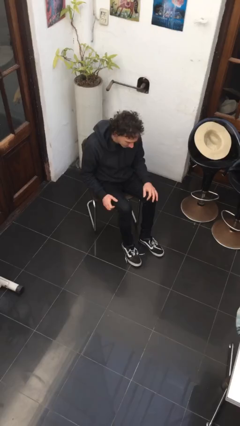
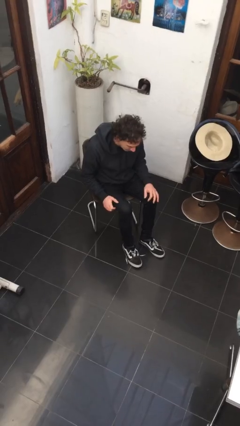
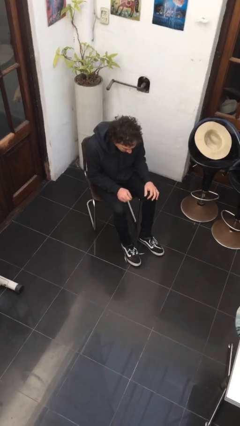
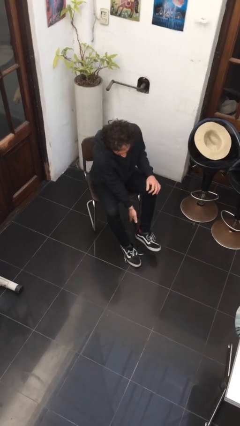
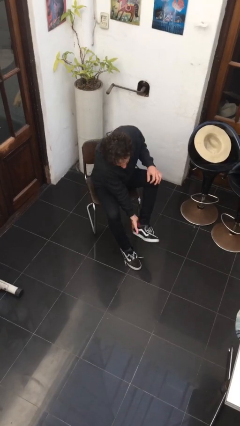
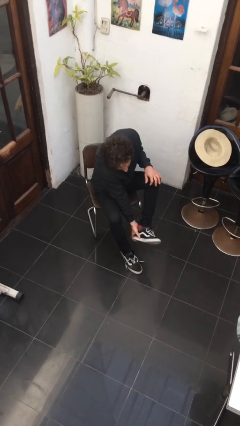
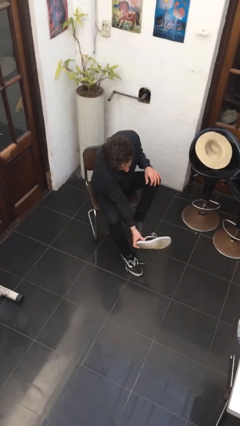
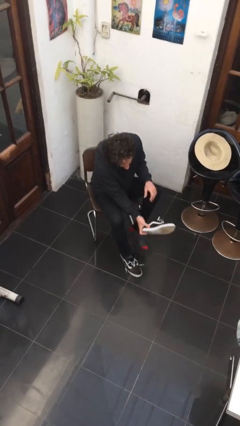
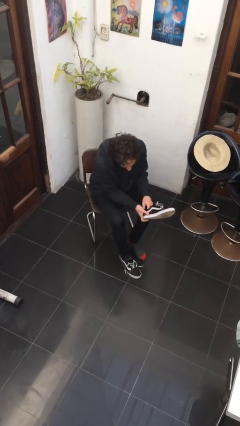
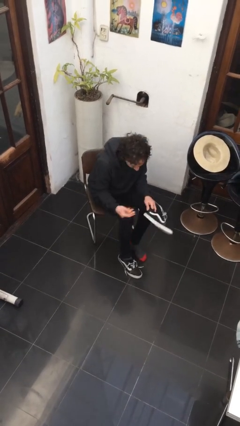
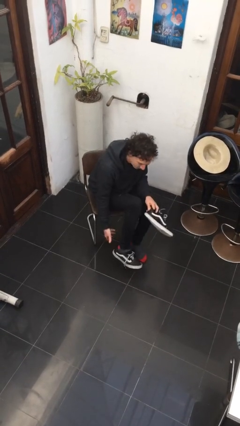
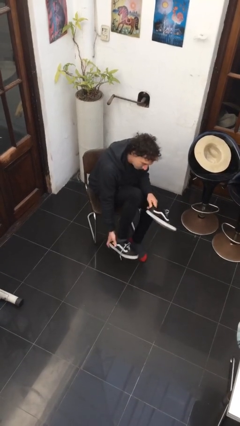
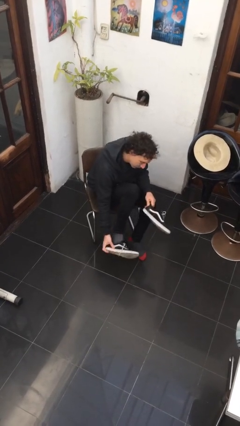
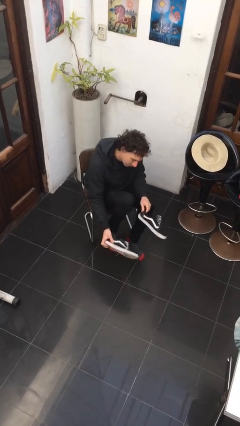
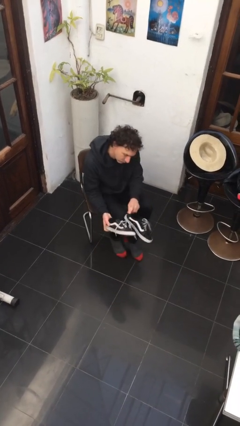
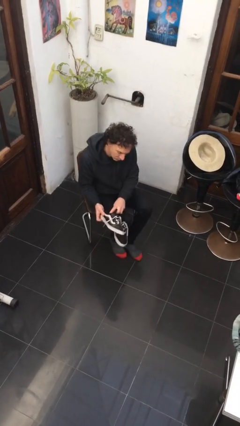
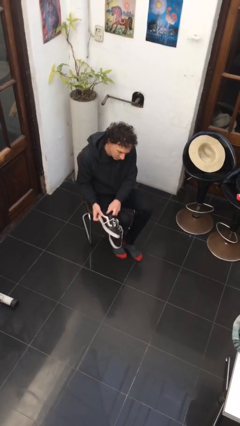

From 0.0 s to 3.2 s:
person takes off shoes

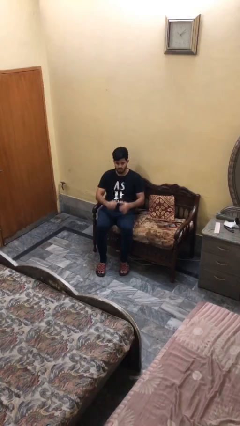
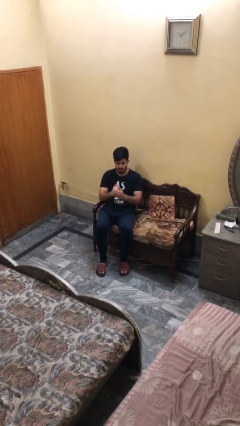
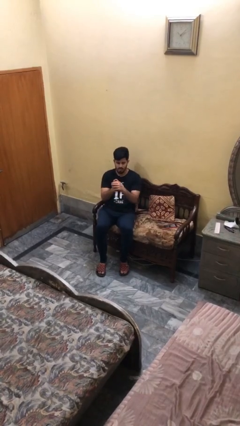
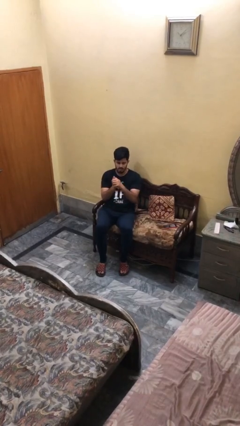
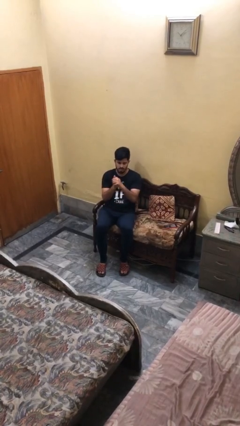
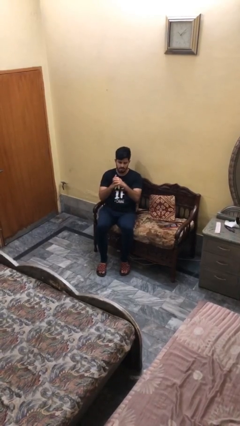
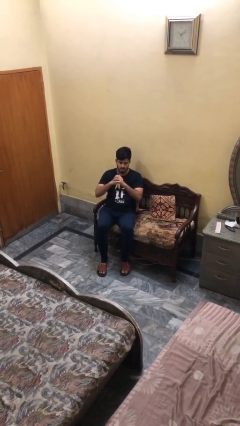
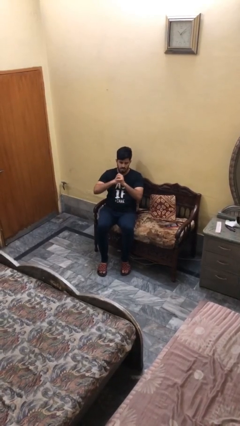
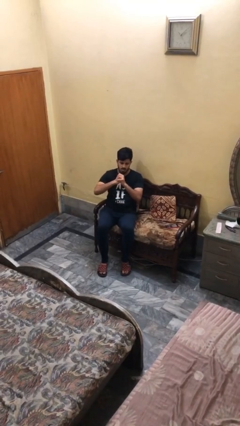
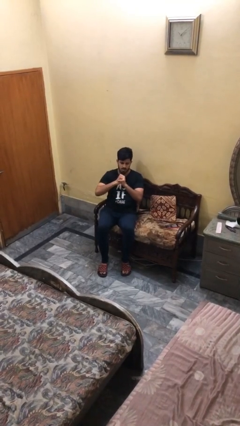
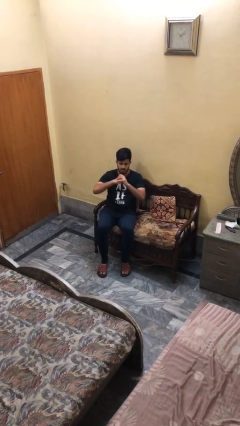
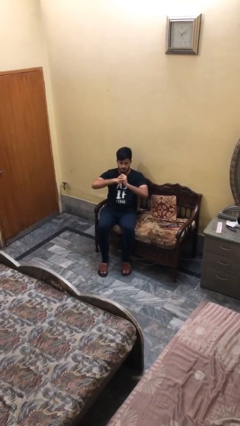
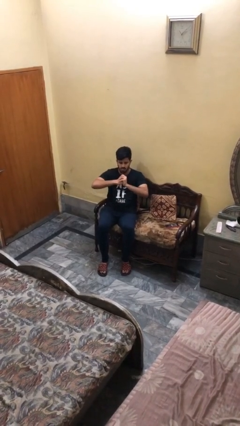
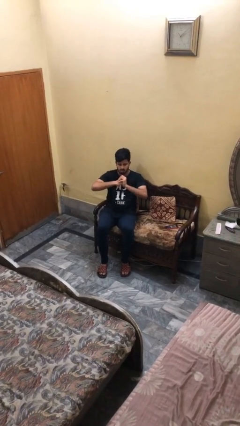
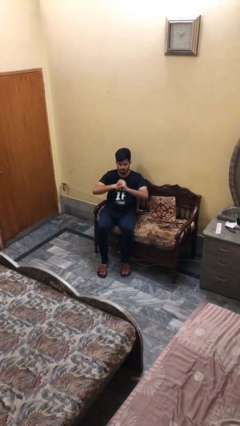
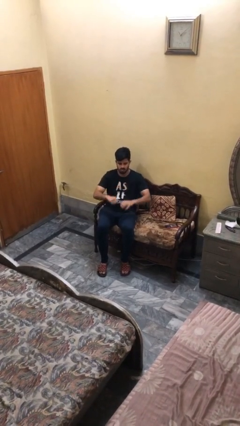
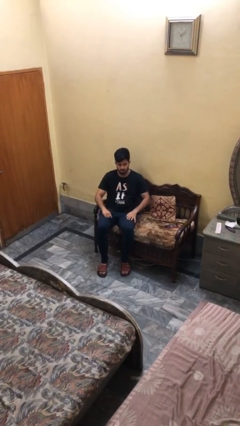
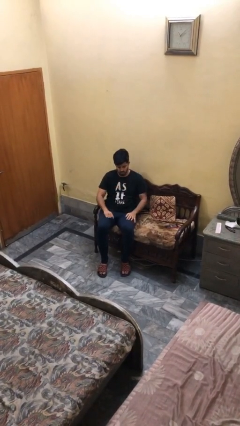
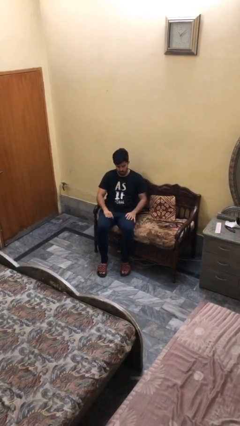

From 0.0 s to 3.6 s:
person cracks knuckles

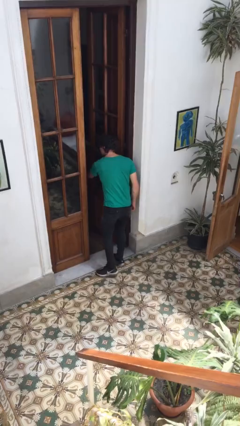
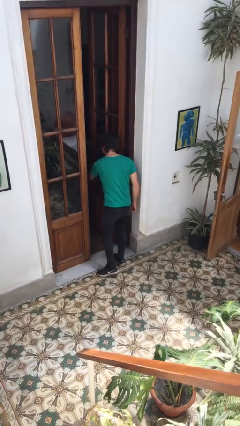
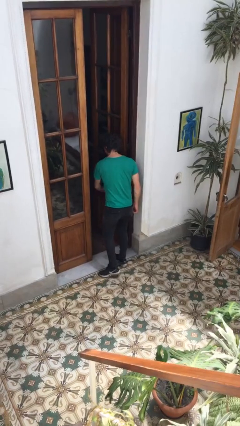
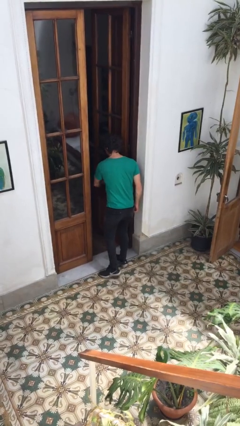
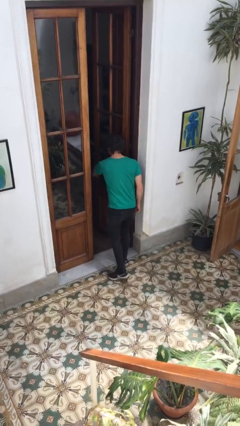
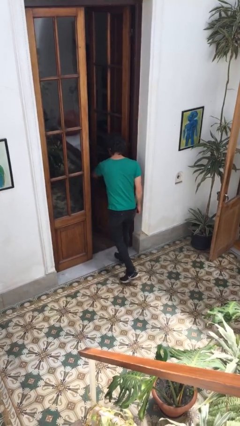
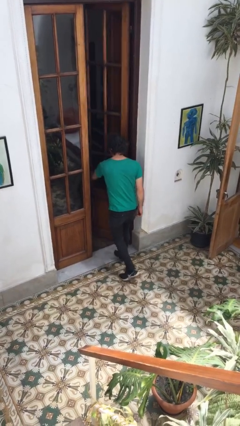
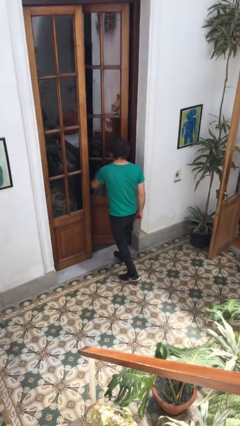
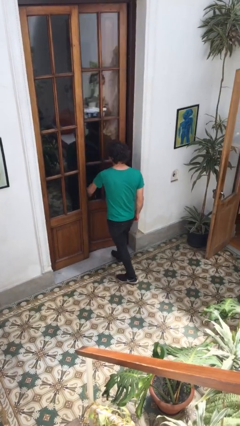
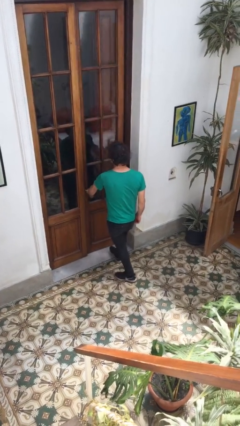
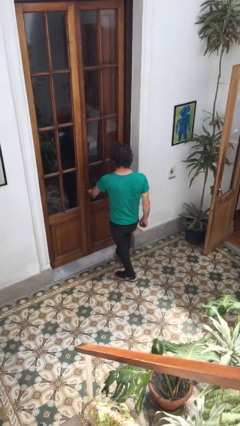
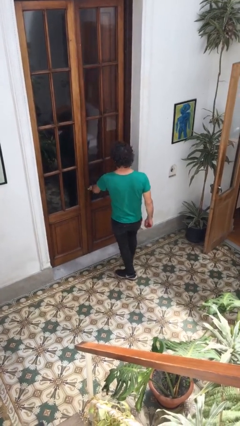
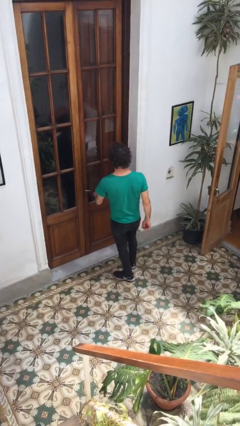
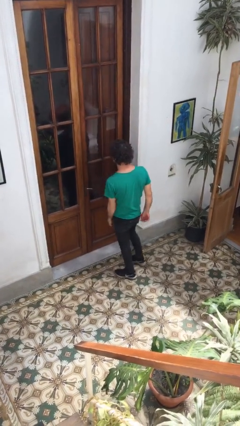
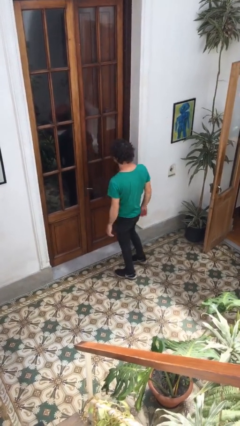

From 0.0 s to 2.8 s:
person closes facility door

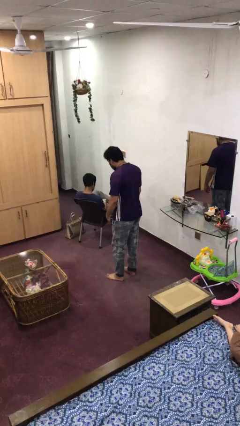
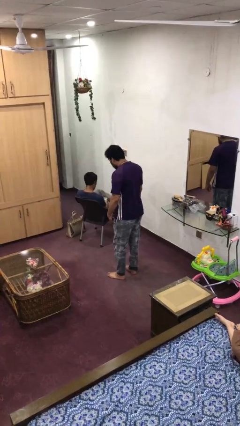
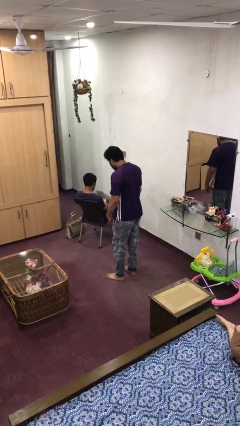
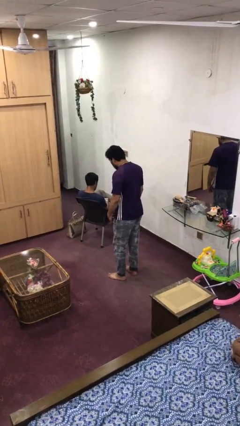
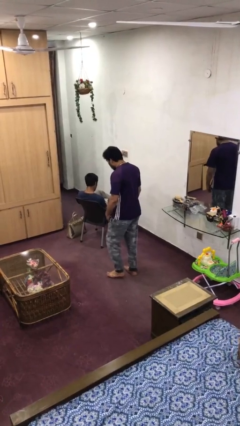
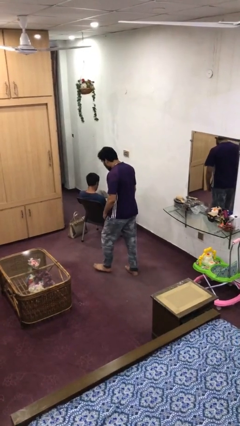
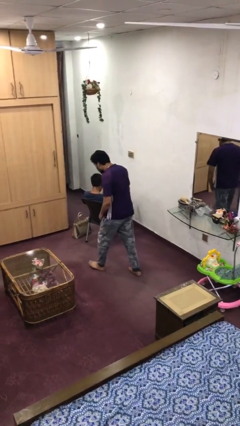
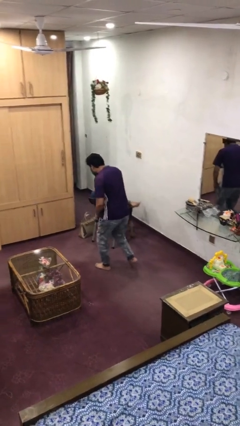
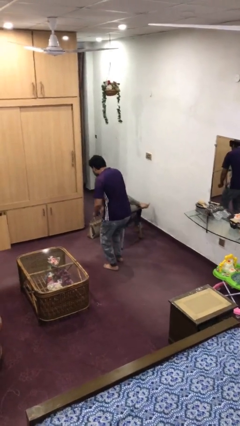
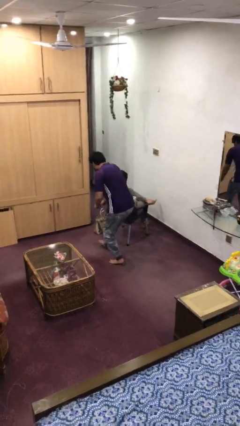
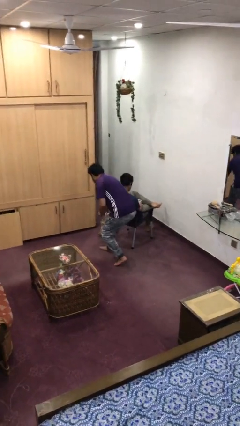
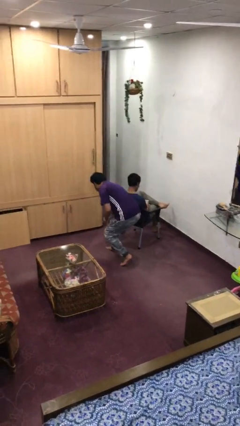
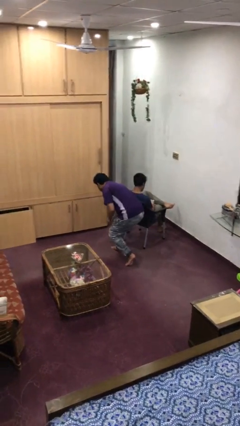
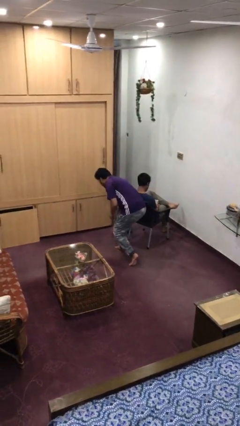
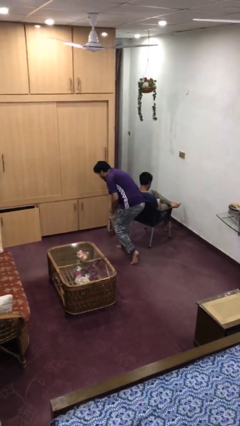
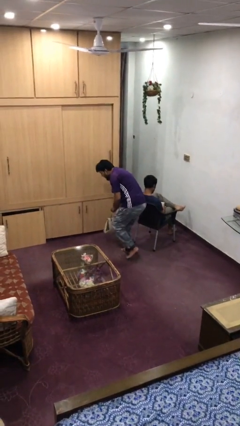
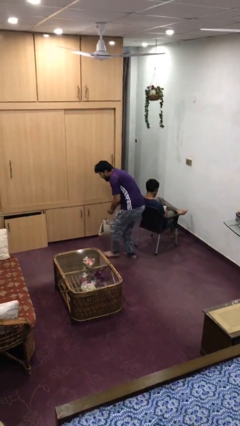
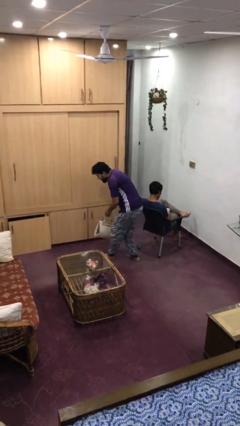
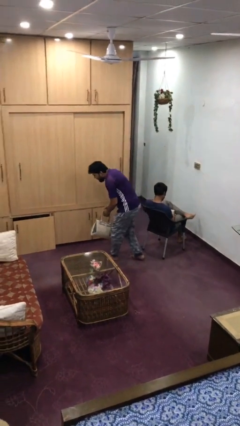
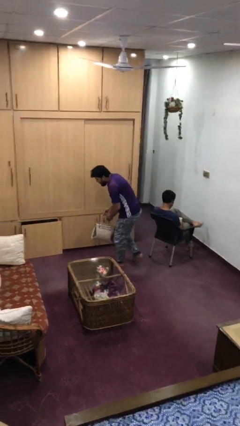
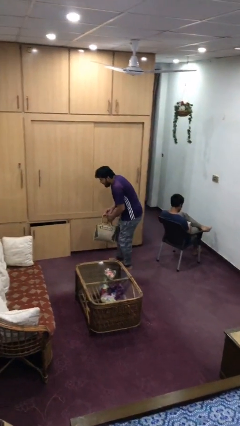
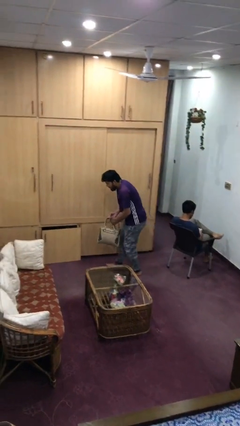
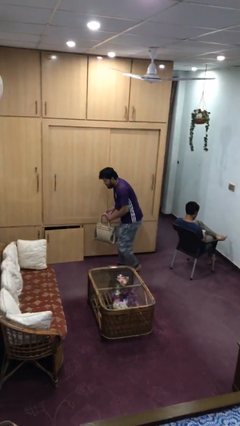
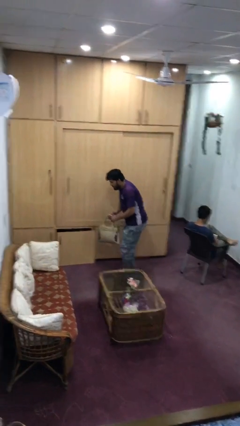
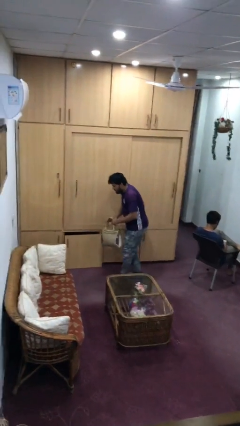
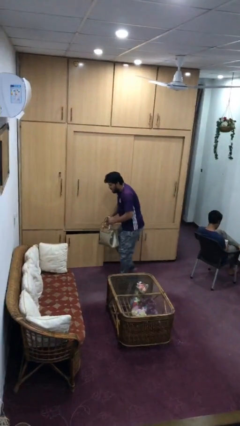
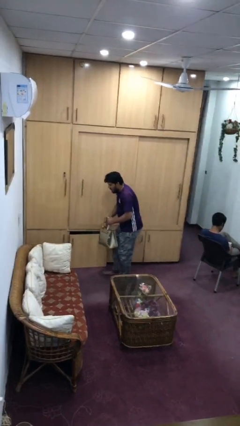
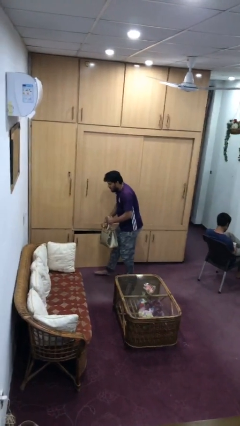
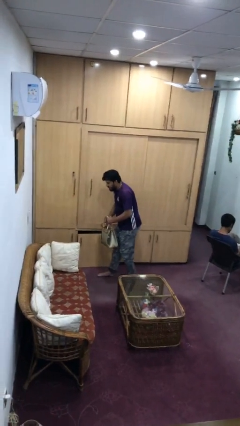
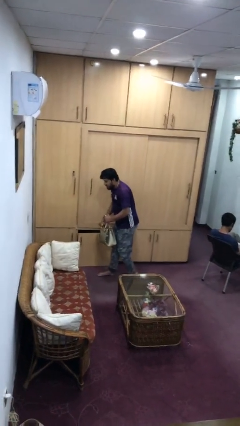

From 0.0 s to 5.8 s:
person steals object from person

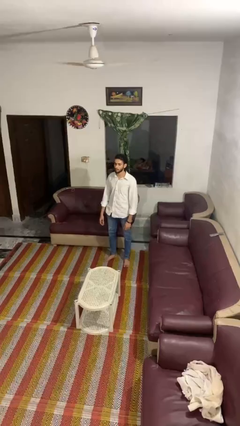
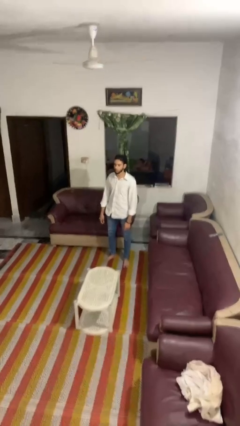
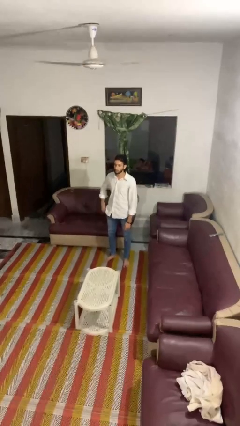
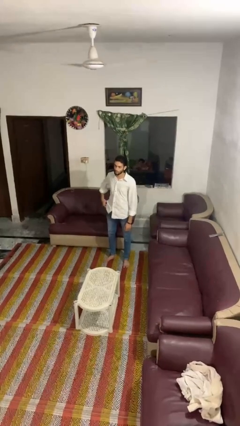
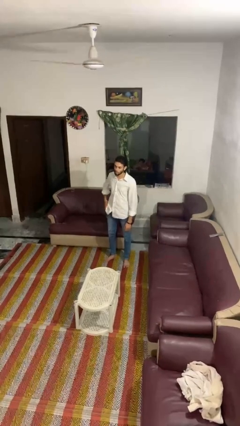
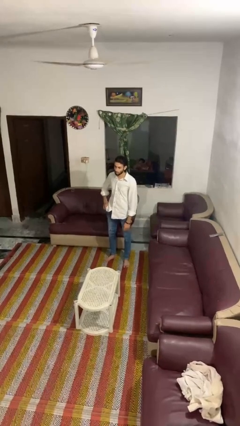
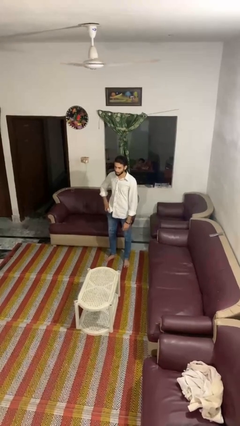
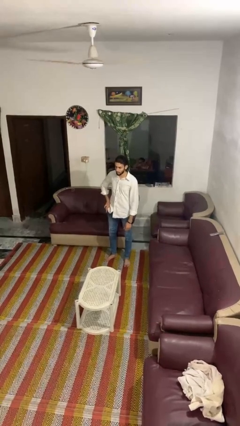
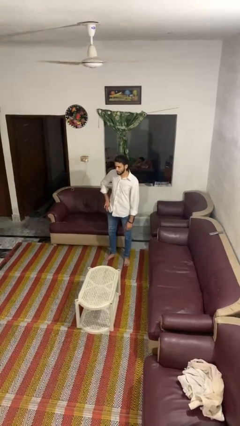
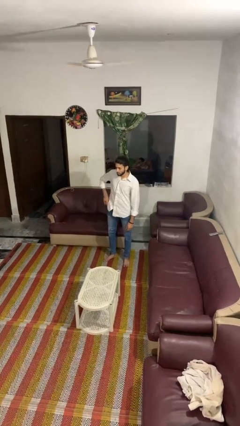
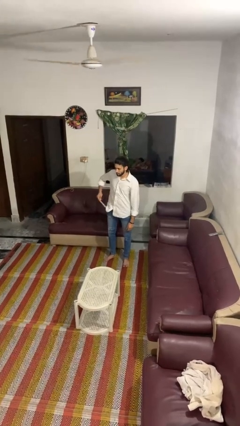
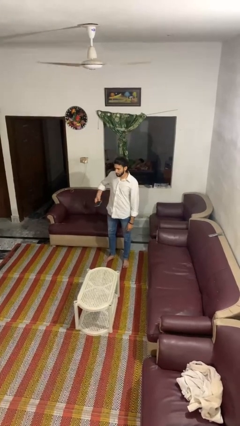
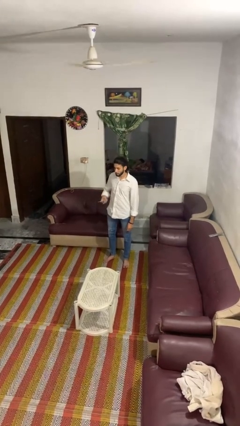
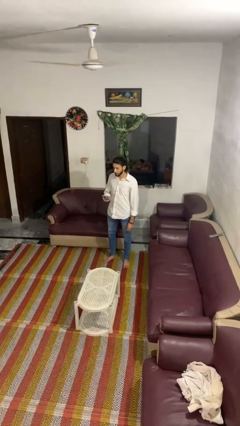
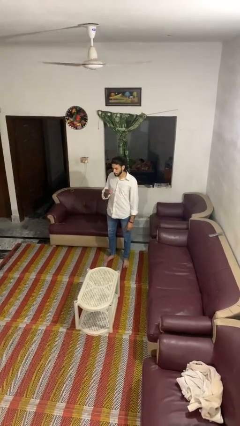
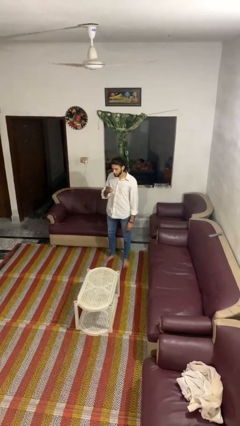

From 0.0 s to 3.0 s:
person takes phone from pocket
